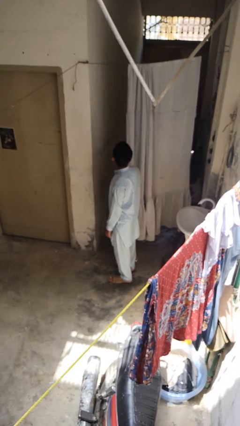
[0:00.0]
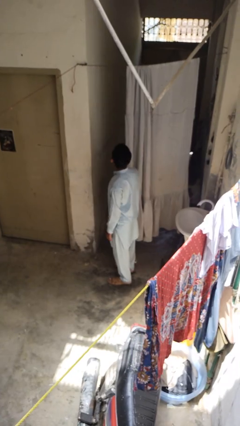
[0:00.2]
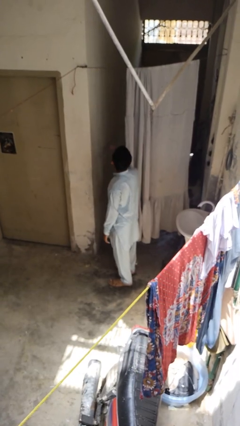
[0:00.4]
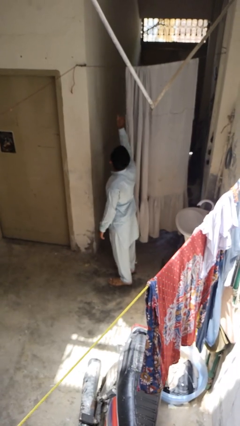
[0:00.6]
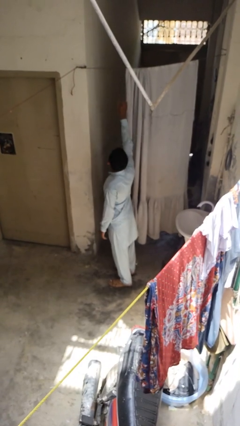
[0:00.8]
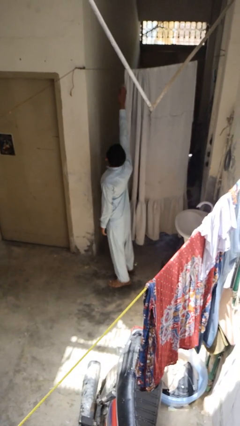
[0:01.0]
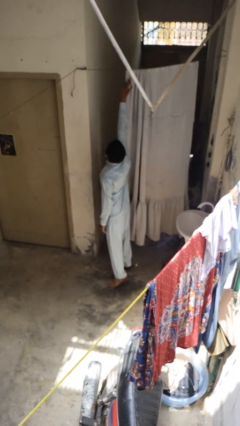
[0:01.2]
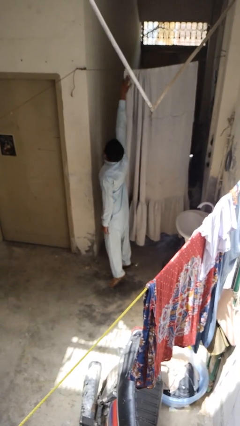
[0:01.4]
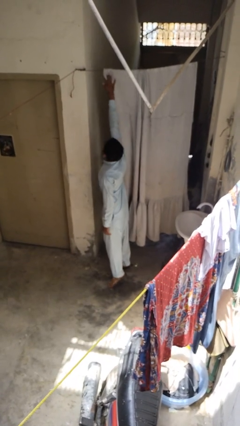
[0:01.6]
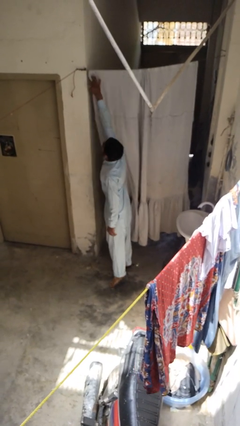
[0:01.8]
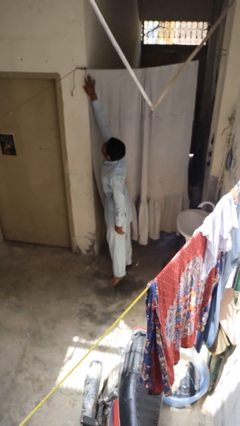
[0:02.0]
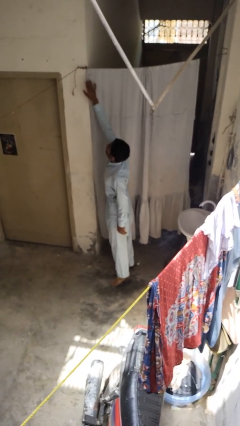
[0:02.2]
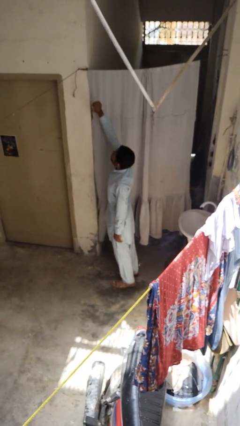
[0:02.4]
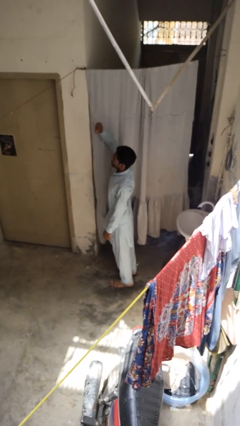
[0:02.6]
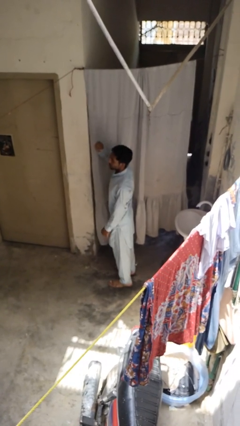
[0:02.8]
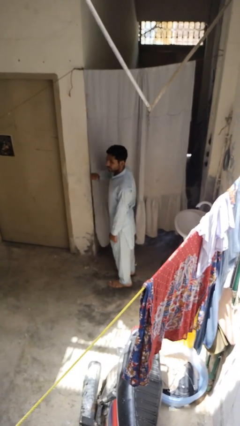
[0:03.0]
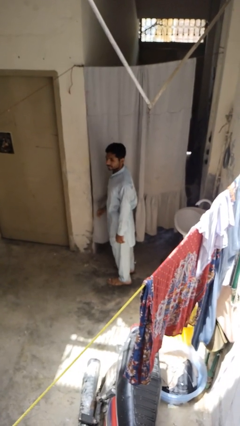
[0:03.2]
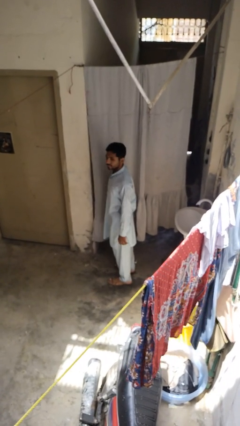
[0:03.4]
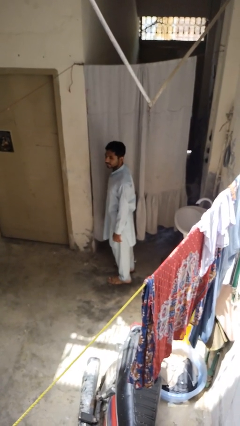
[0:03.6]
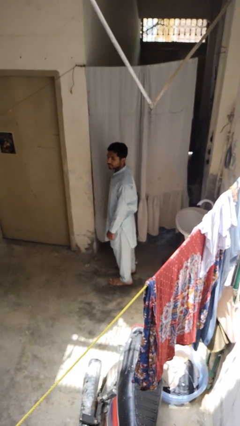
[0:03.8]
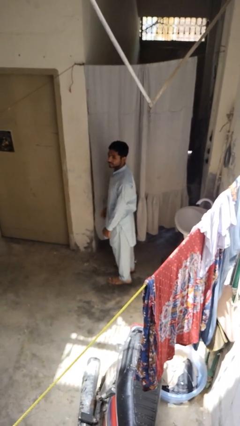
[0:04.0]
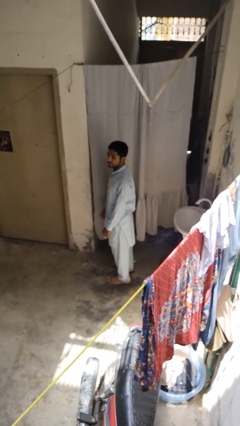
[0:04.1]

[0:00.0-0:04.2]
person closes curtains

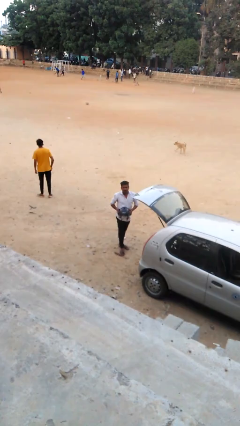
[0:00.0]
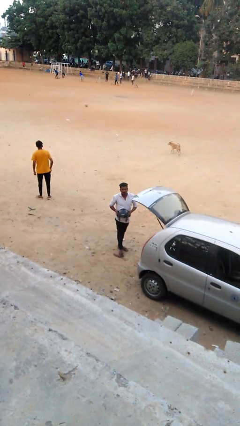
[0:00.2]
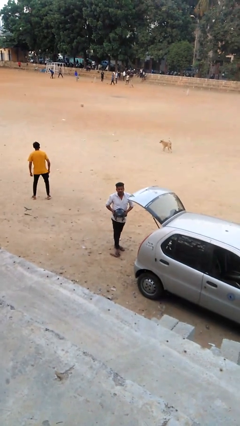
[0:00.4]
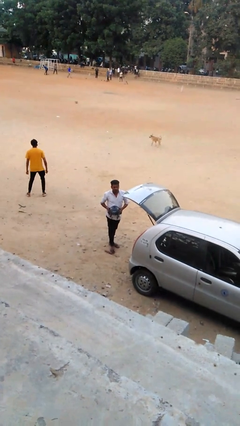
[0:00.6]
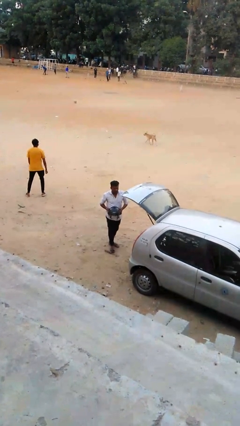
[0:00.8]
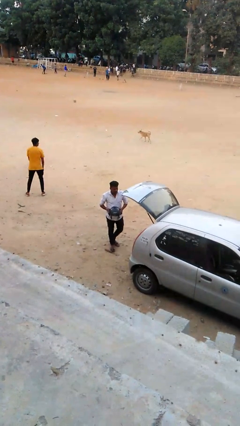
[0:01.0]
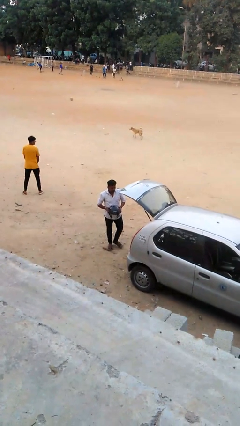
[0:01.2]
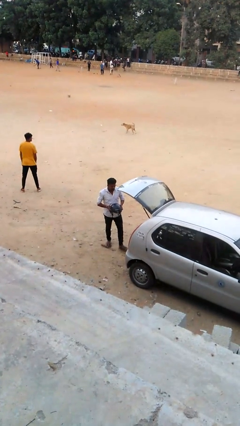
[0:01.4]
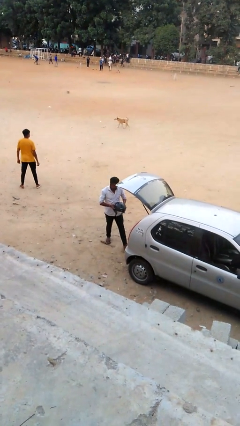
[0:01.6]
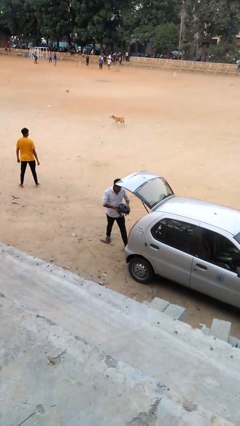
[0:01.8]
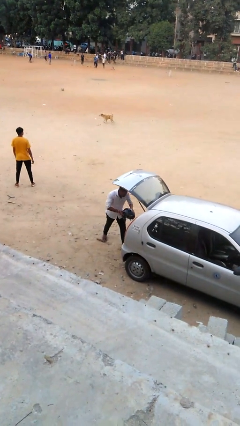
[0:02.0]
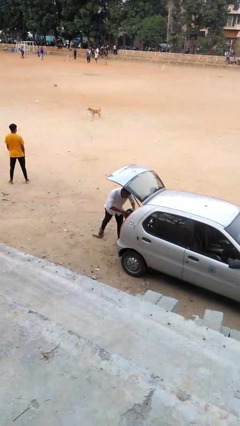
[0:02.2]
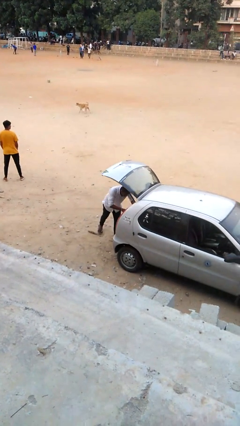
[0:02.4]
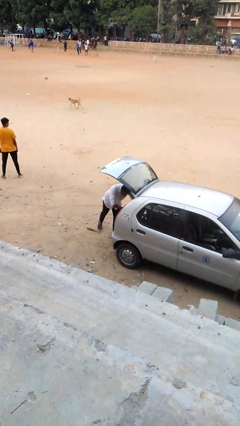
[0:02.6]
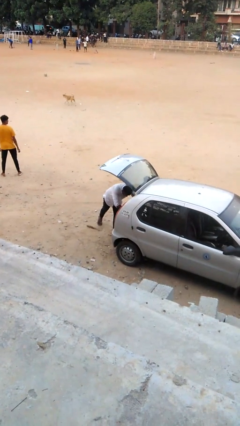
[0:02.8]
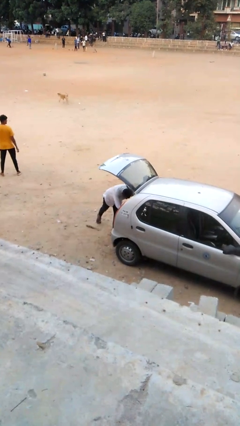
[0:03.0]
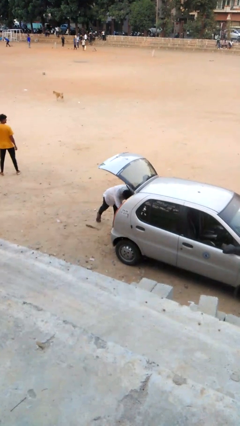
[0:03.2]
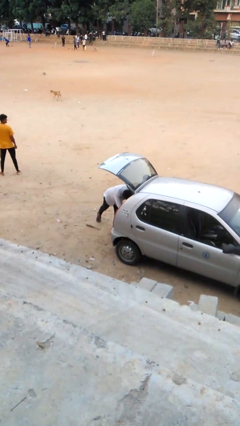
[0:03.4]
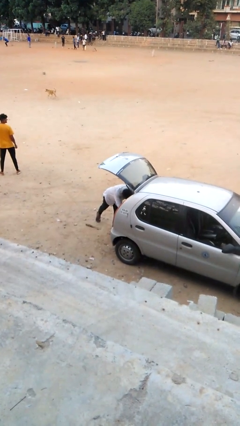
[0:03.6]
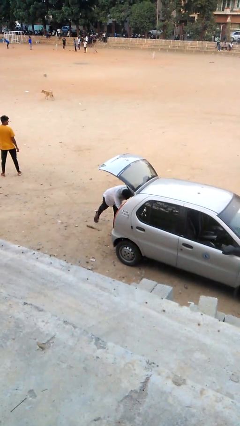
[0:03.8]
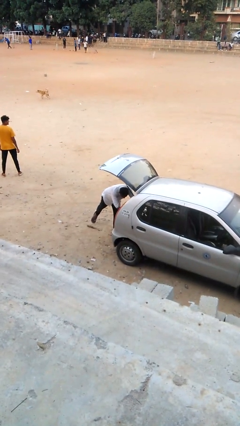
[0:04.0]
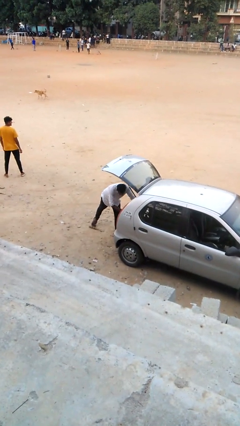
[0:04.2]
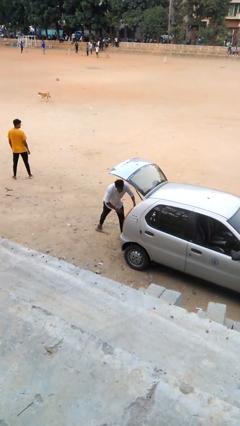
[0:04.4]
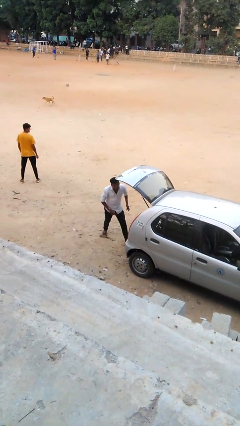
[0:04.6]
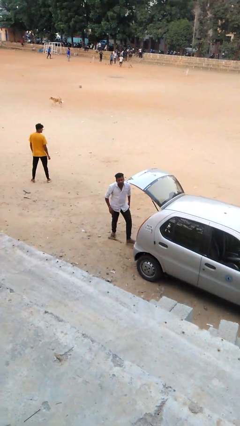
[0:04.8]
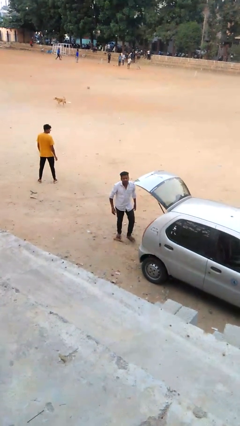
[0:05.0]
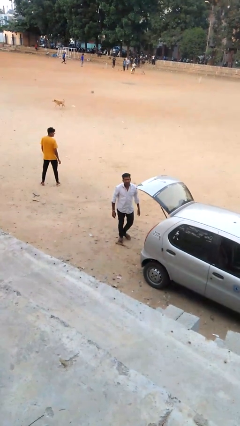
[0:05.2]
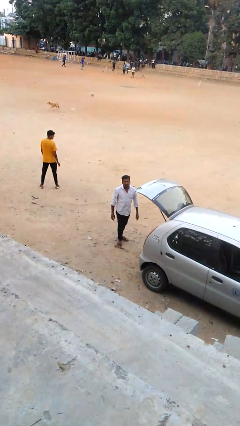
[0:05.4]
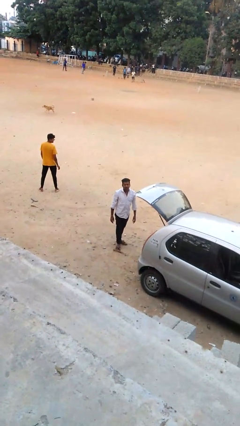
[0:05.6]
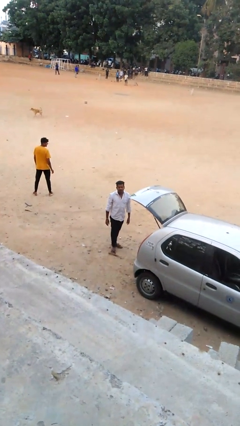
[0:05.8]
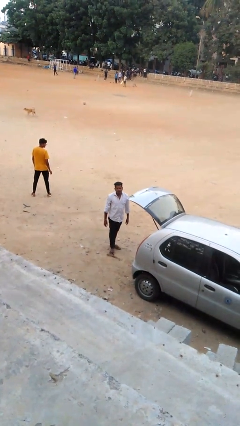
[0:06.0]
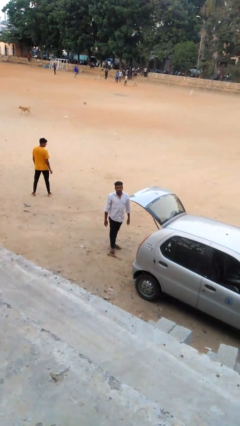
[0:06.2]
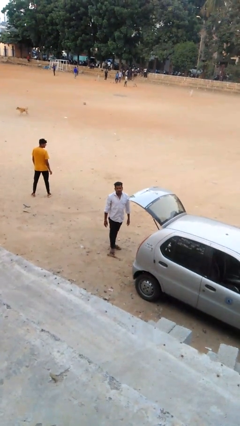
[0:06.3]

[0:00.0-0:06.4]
person loads car

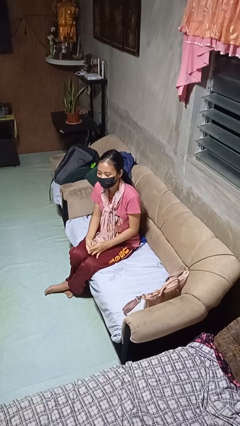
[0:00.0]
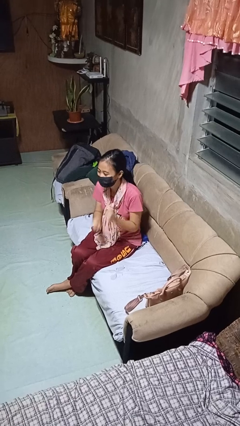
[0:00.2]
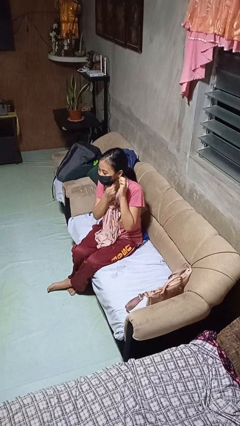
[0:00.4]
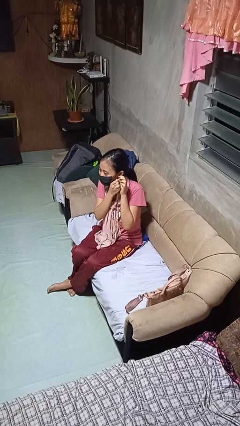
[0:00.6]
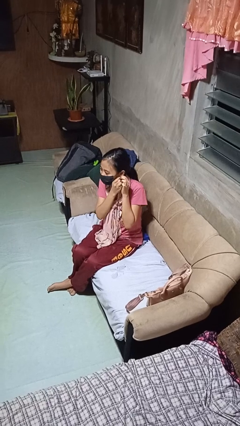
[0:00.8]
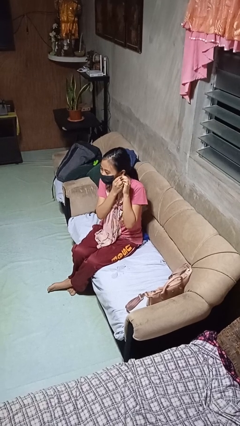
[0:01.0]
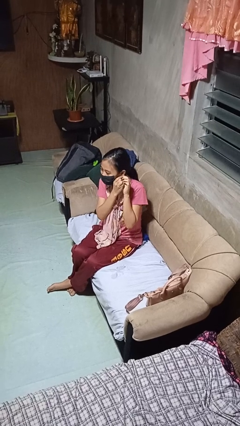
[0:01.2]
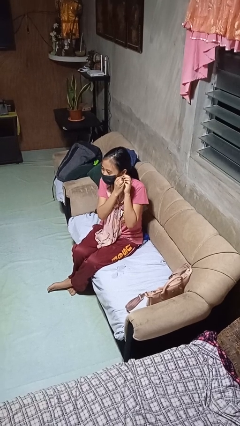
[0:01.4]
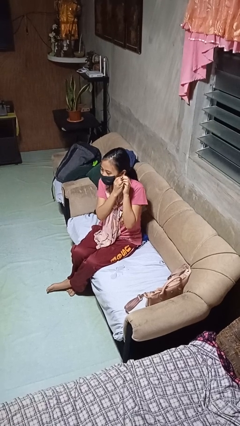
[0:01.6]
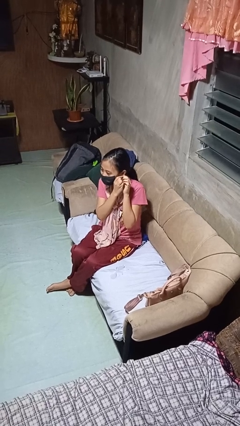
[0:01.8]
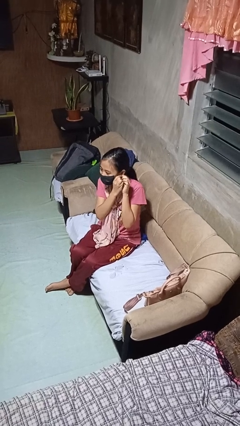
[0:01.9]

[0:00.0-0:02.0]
person puts on earrings

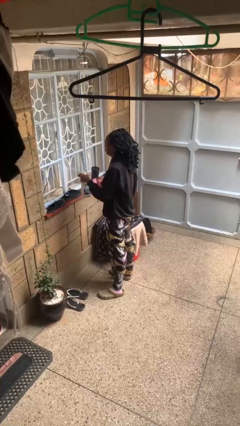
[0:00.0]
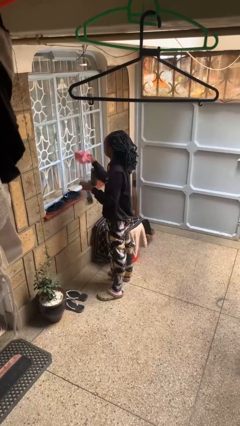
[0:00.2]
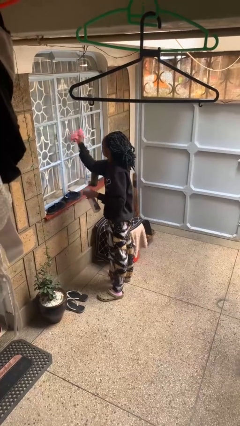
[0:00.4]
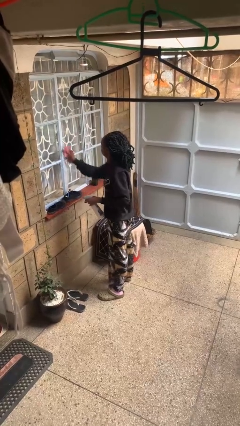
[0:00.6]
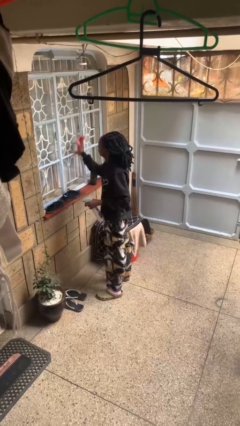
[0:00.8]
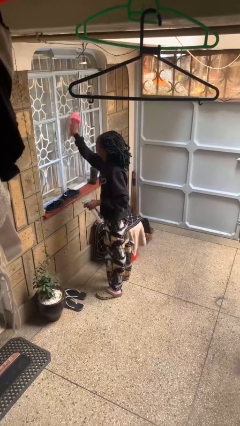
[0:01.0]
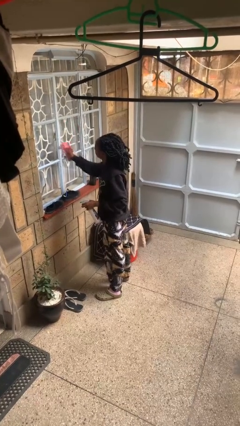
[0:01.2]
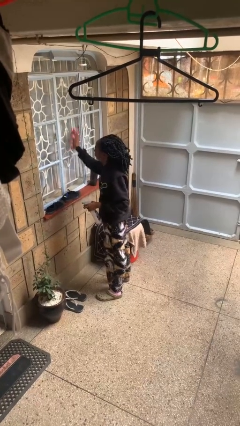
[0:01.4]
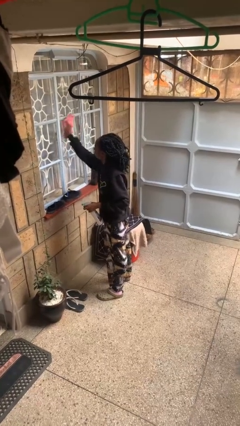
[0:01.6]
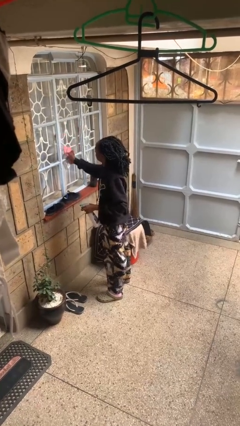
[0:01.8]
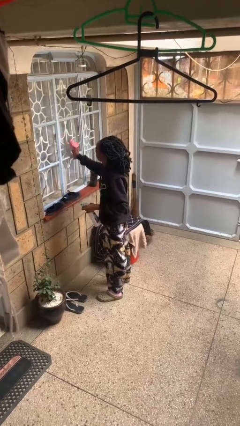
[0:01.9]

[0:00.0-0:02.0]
person washes window

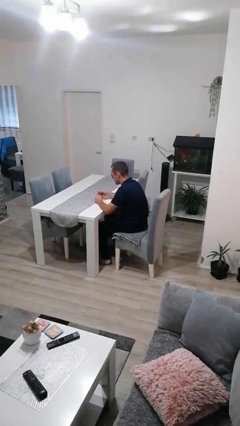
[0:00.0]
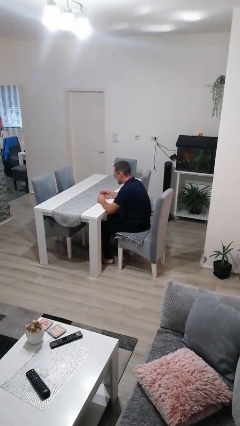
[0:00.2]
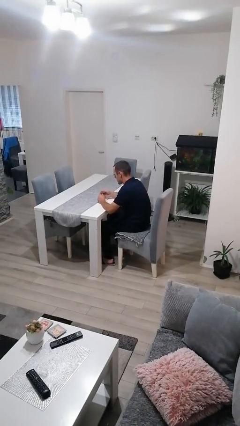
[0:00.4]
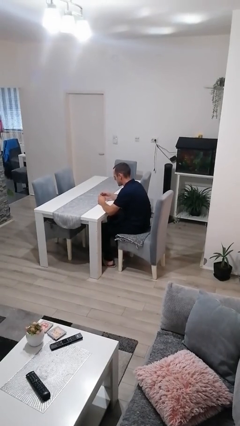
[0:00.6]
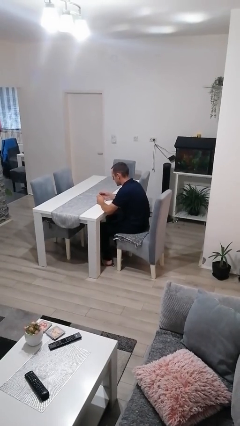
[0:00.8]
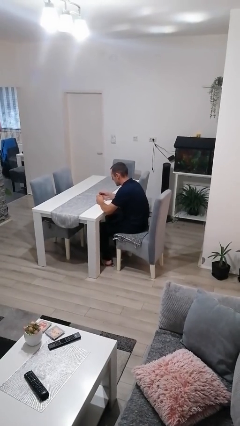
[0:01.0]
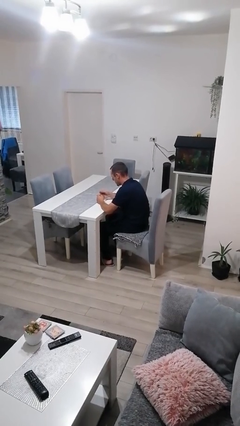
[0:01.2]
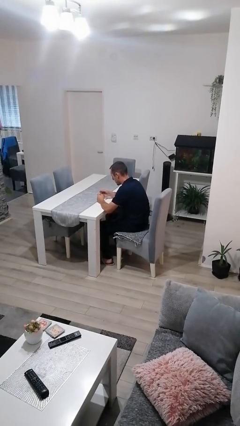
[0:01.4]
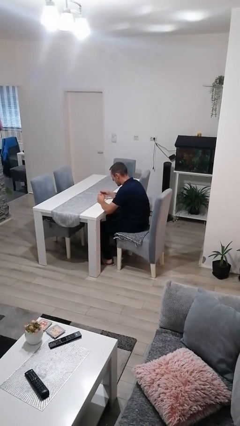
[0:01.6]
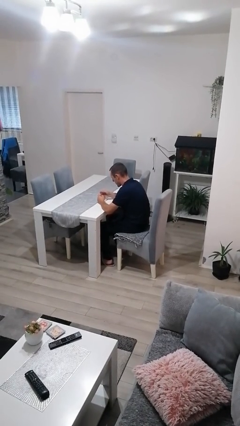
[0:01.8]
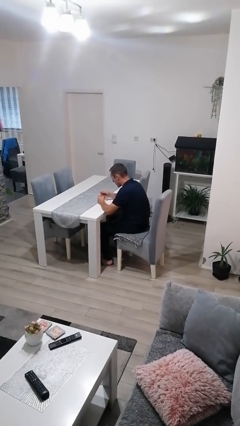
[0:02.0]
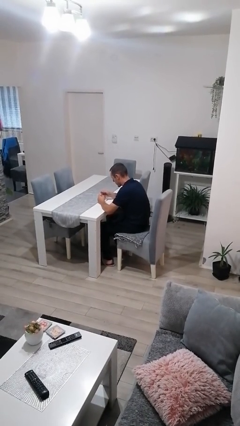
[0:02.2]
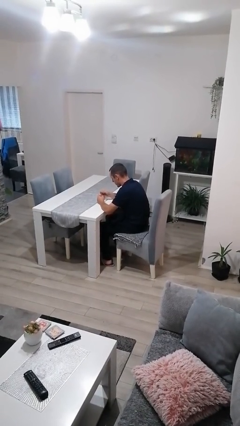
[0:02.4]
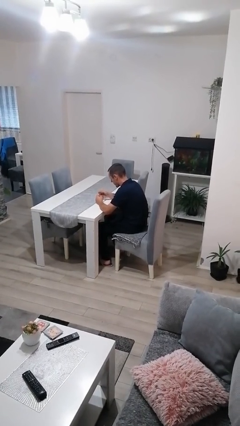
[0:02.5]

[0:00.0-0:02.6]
person clips fingernails
